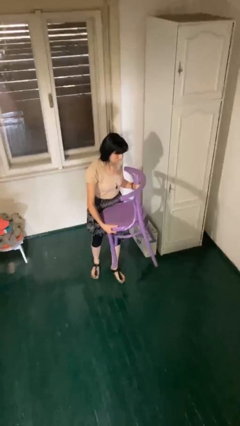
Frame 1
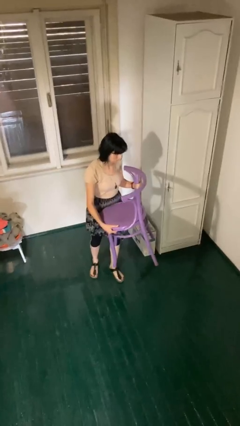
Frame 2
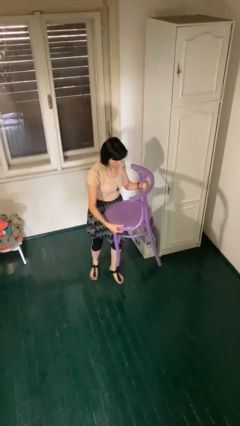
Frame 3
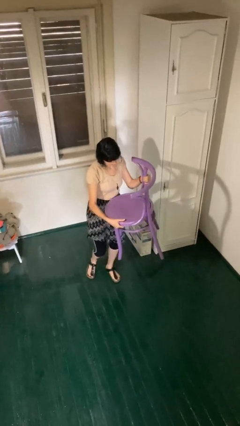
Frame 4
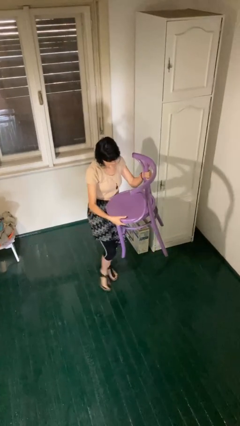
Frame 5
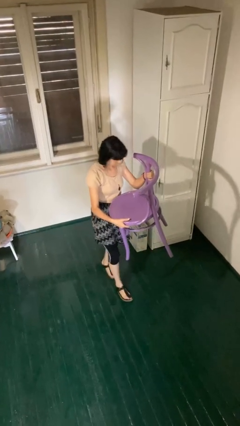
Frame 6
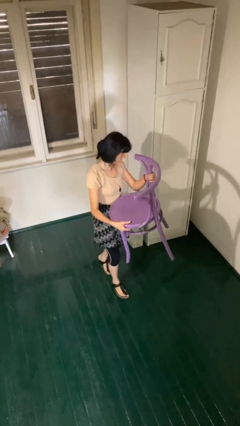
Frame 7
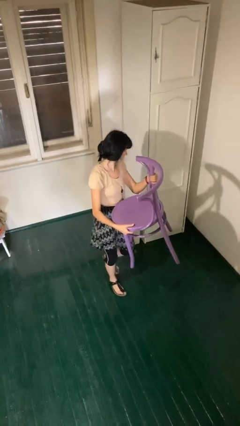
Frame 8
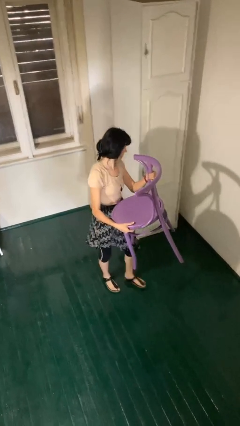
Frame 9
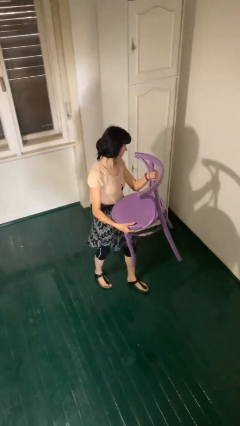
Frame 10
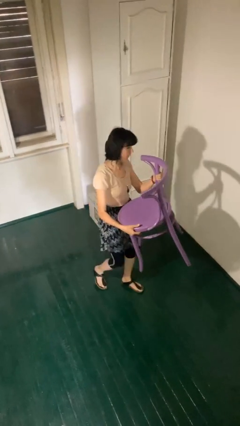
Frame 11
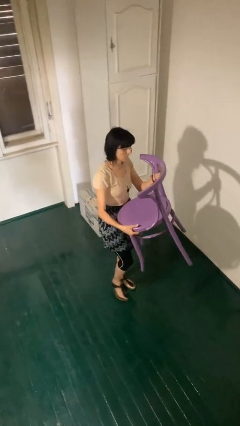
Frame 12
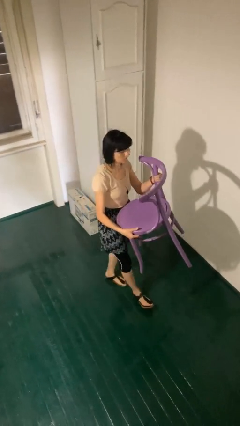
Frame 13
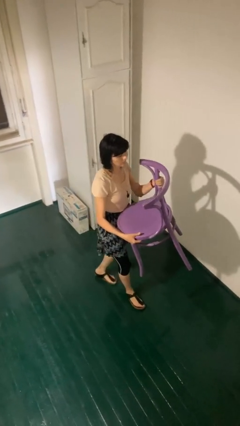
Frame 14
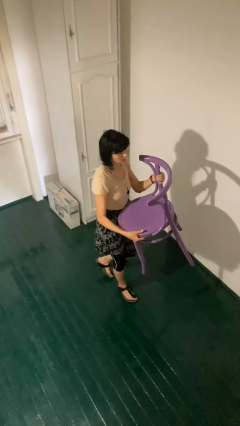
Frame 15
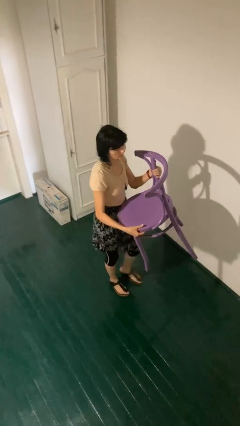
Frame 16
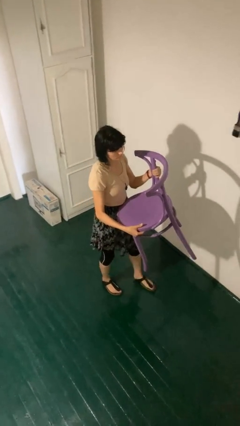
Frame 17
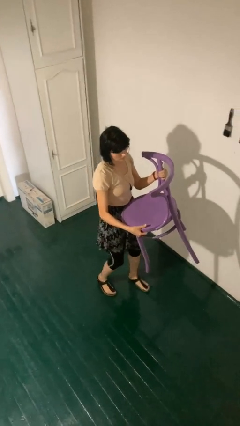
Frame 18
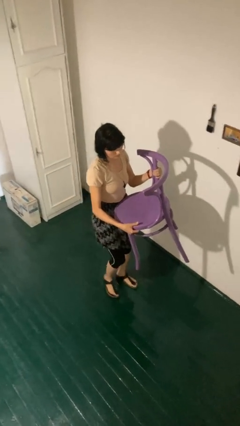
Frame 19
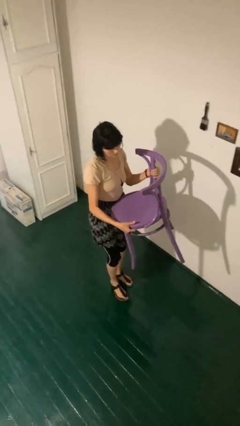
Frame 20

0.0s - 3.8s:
person carries furniture

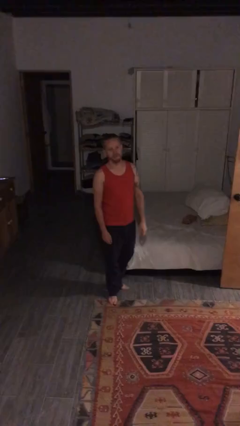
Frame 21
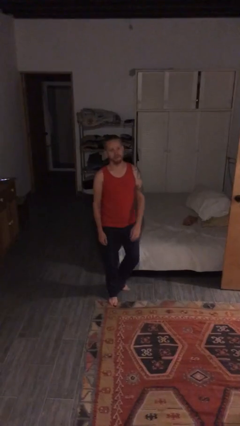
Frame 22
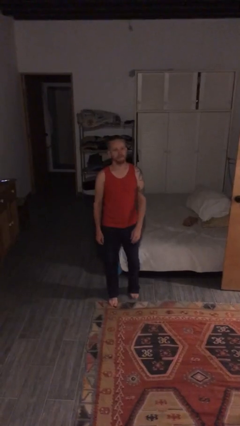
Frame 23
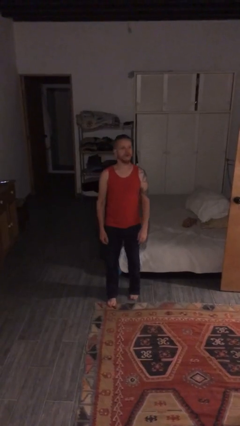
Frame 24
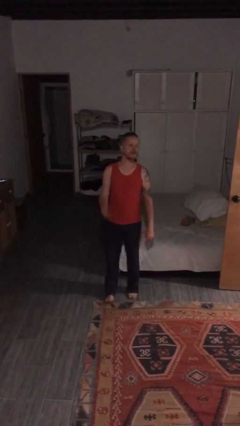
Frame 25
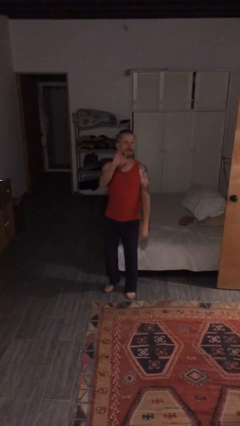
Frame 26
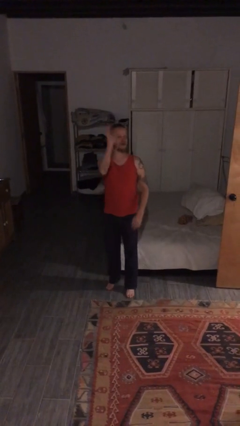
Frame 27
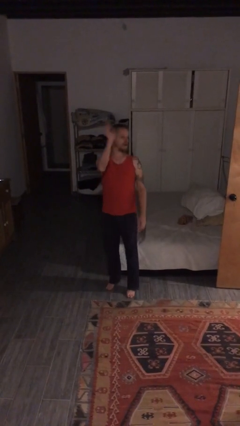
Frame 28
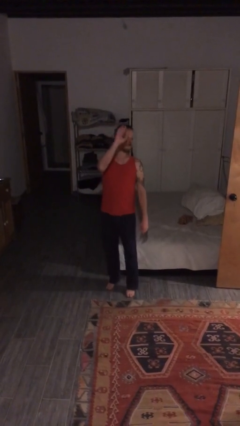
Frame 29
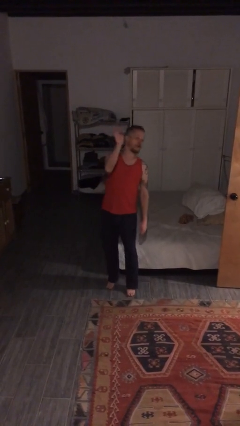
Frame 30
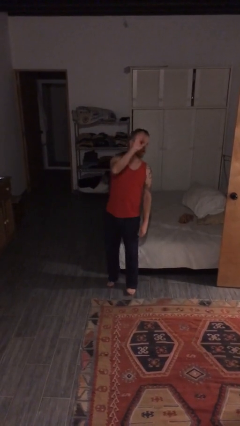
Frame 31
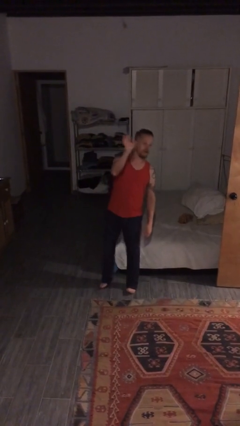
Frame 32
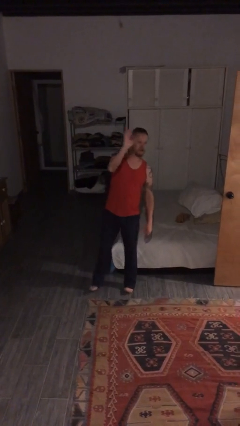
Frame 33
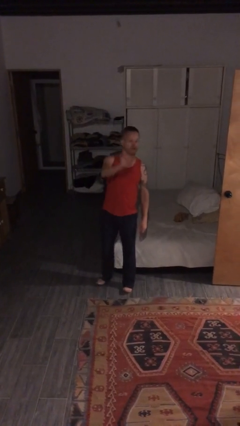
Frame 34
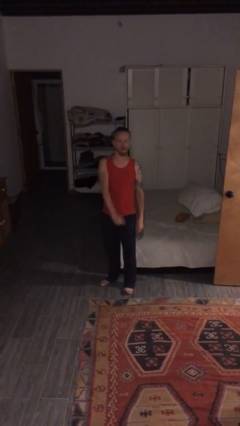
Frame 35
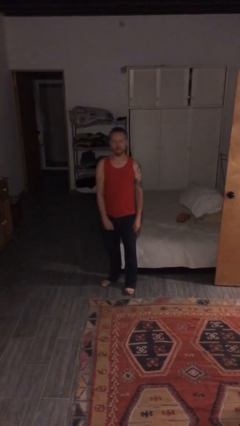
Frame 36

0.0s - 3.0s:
person waves at person

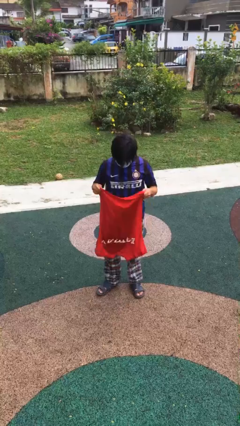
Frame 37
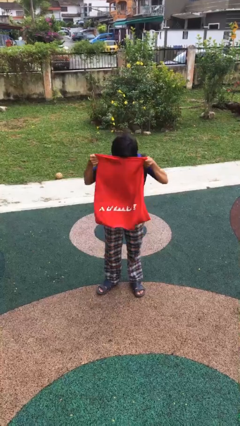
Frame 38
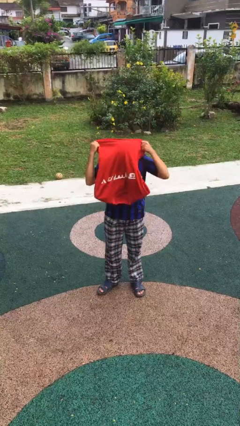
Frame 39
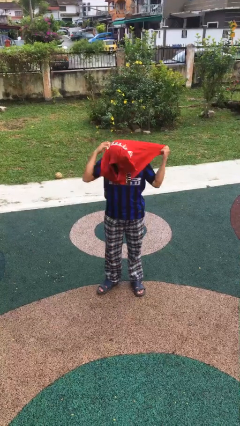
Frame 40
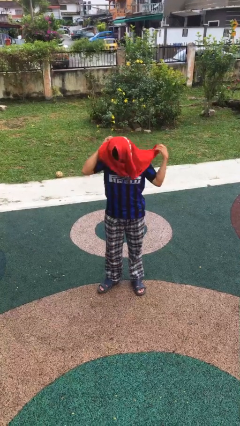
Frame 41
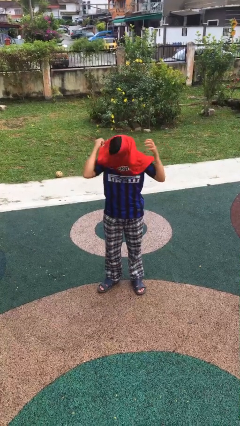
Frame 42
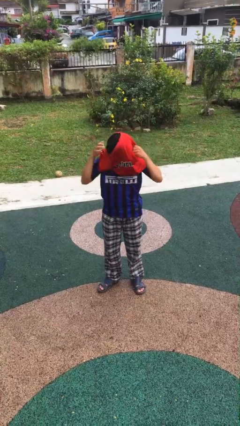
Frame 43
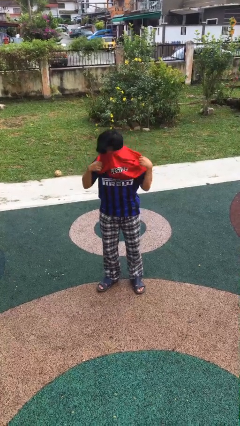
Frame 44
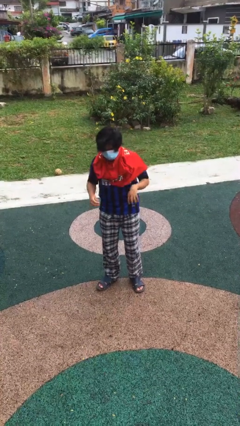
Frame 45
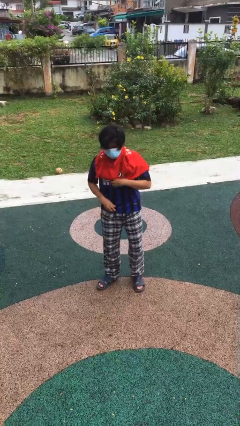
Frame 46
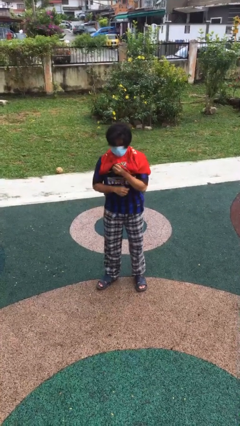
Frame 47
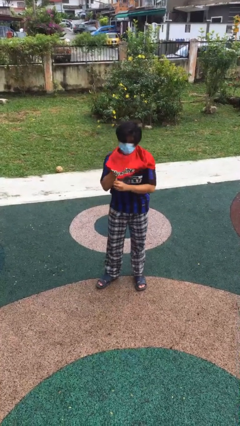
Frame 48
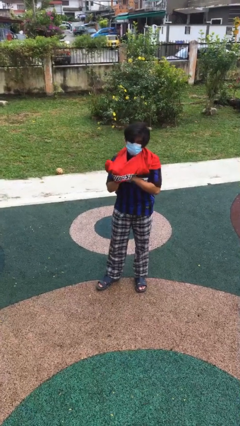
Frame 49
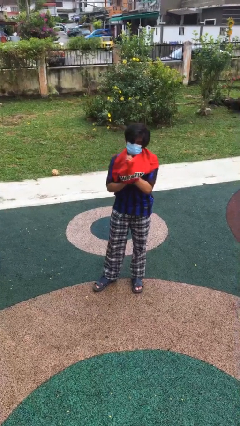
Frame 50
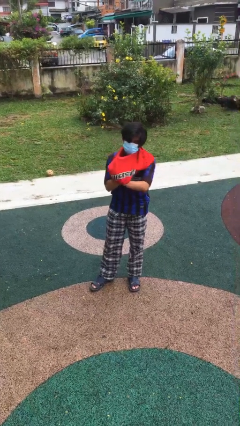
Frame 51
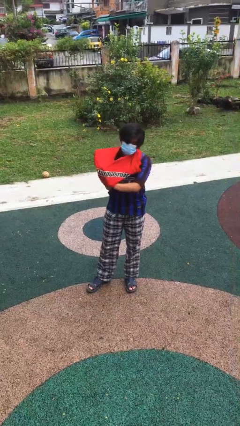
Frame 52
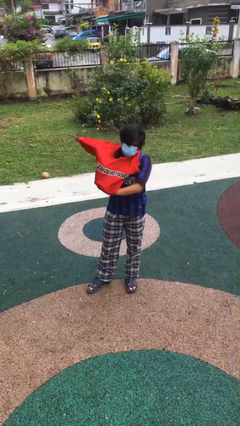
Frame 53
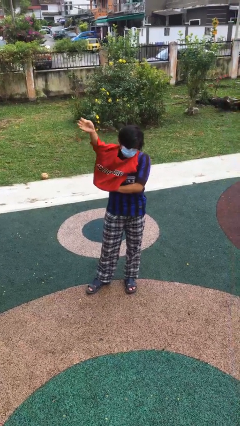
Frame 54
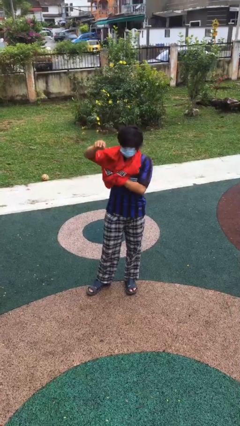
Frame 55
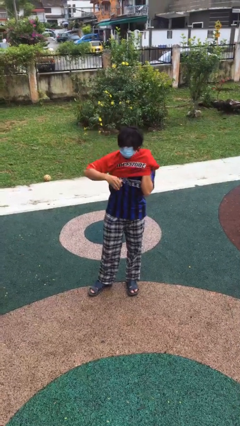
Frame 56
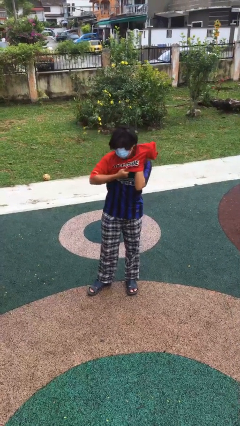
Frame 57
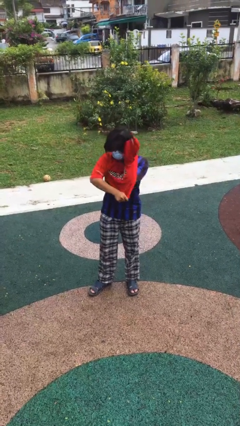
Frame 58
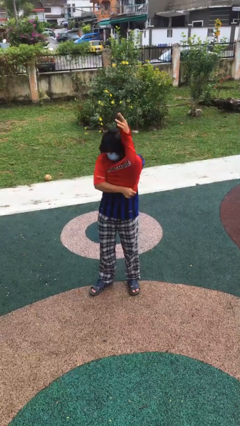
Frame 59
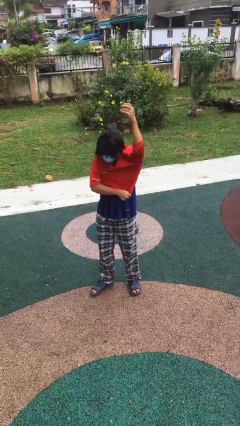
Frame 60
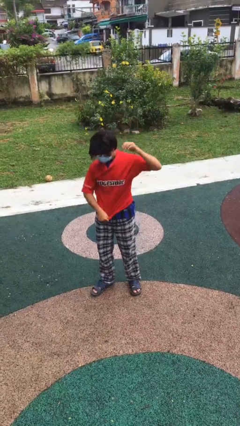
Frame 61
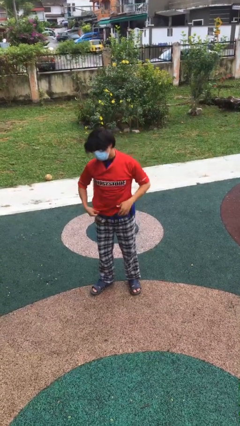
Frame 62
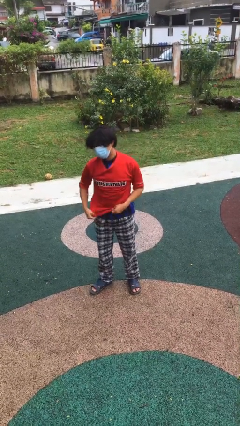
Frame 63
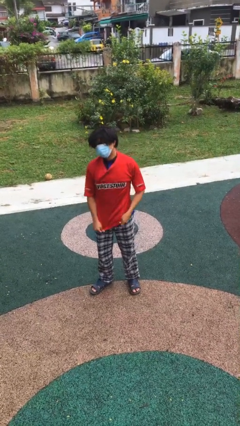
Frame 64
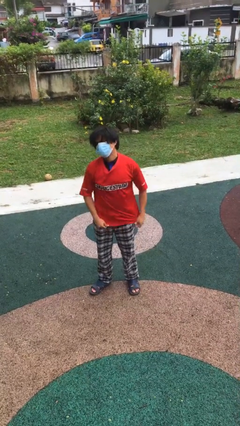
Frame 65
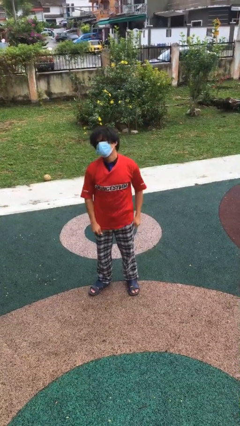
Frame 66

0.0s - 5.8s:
person puts on shirt

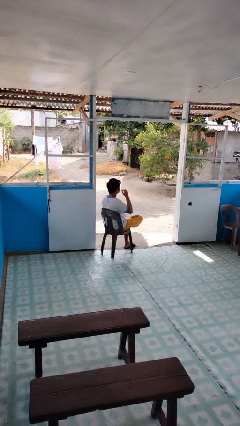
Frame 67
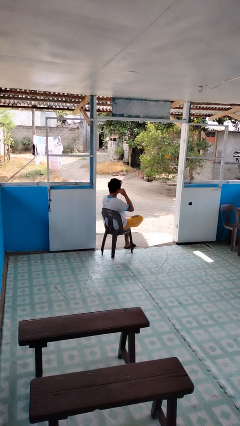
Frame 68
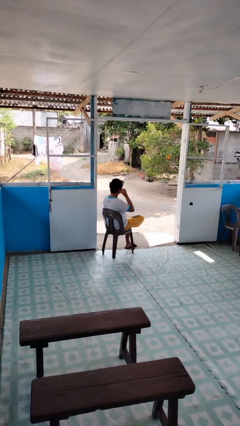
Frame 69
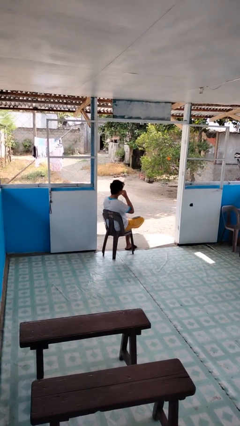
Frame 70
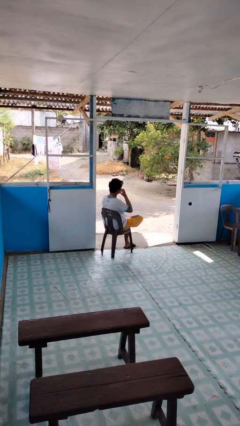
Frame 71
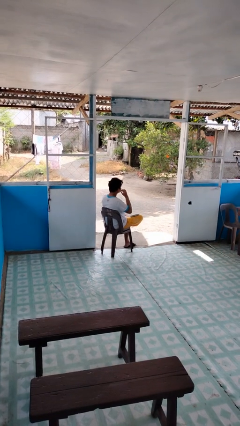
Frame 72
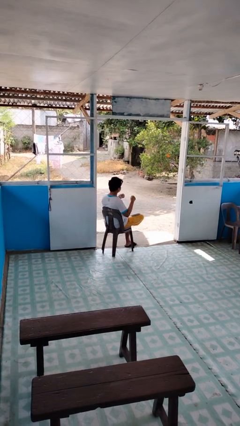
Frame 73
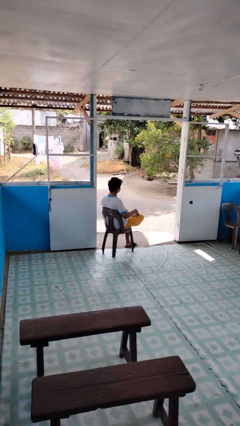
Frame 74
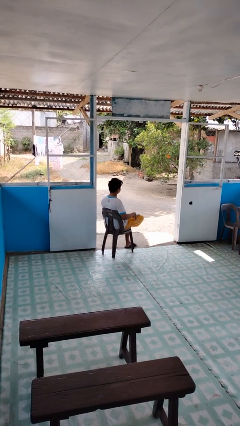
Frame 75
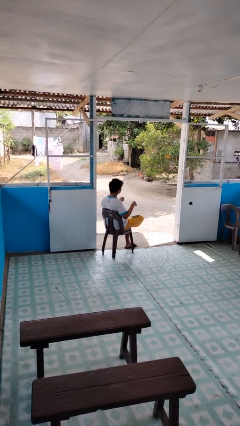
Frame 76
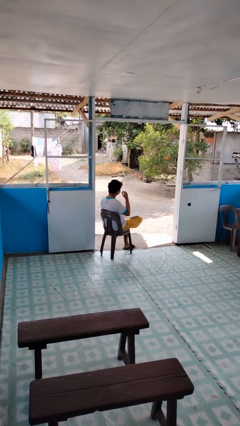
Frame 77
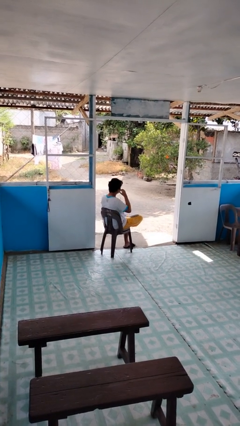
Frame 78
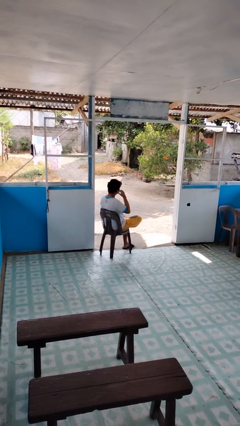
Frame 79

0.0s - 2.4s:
person puts on headphones

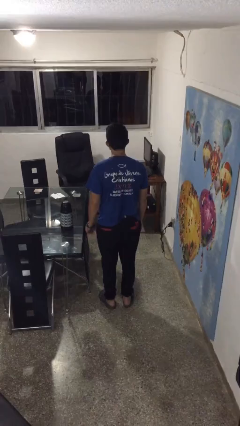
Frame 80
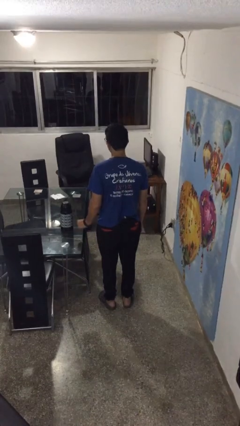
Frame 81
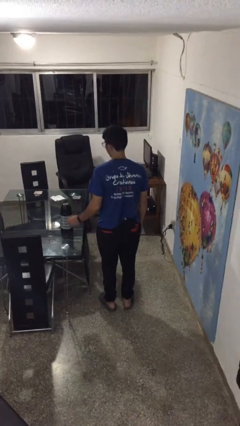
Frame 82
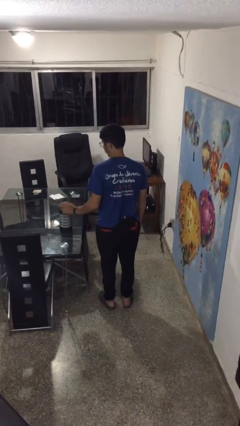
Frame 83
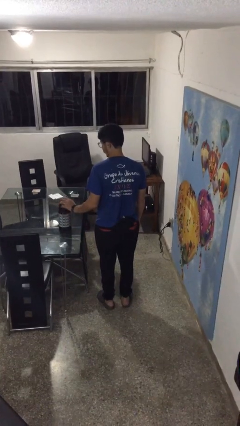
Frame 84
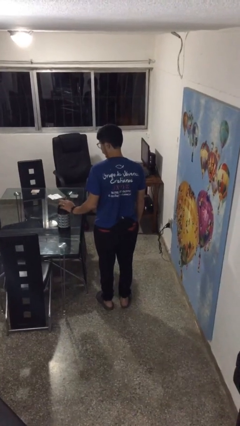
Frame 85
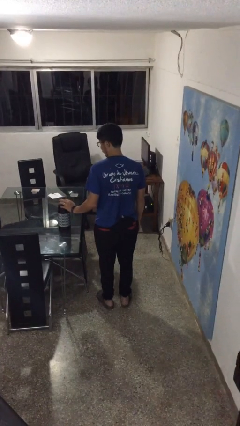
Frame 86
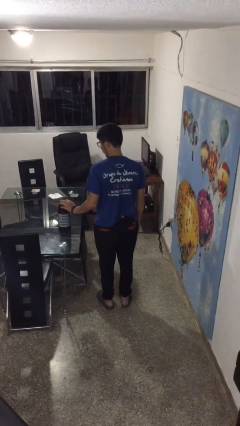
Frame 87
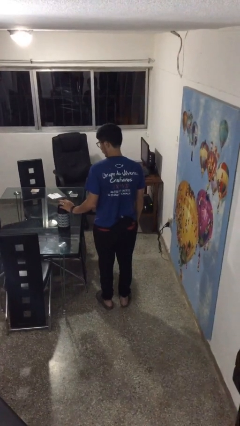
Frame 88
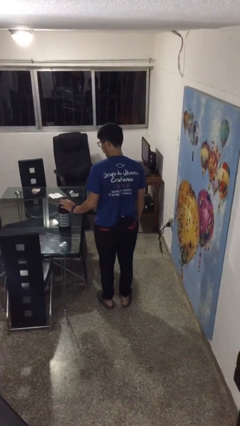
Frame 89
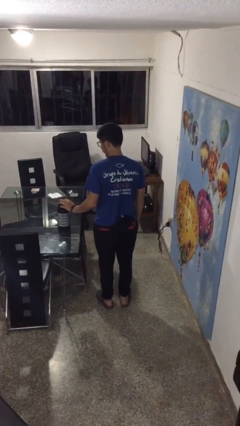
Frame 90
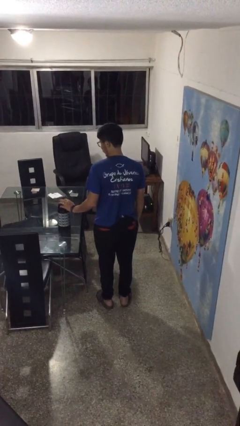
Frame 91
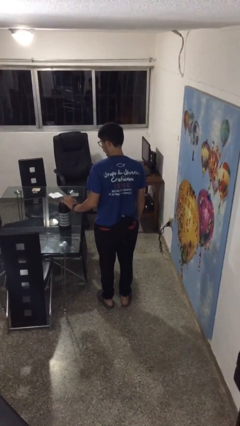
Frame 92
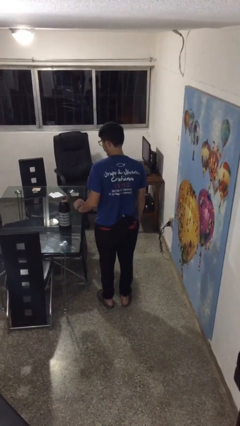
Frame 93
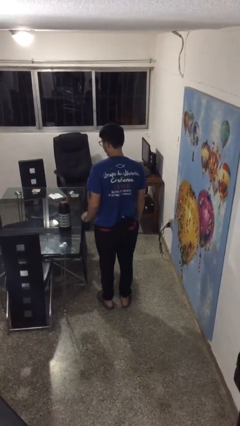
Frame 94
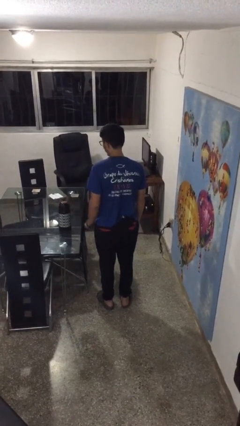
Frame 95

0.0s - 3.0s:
person taps object with finger
